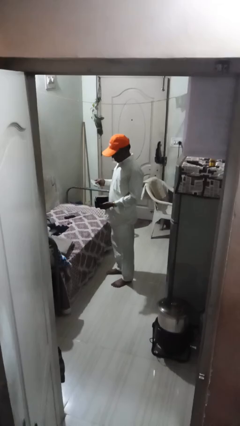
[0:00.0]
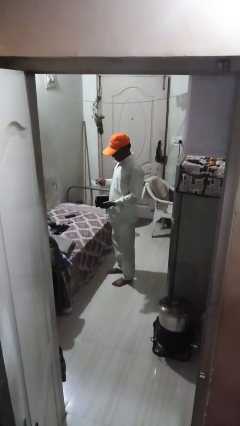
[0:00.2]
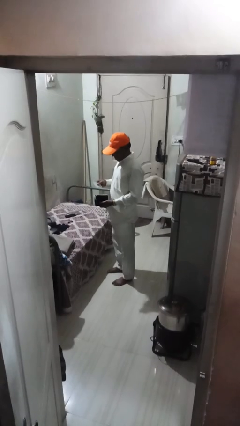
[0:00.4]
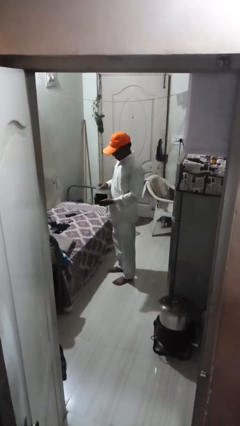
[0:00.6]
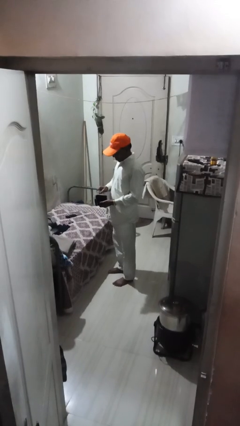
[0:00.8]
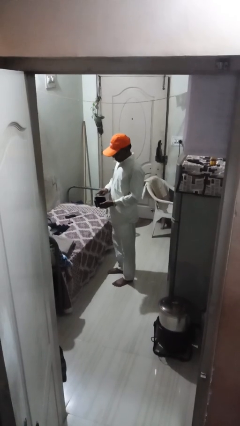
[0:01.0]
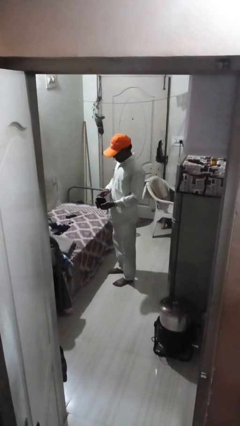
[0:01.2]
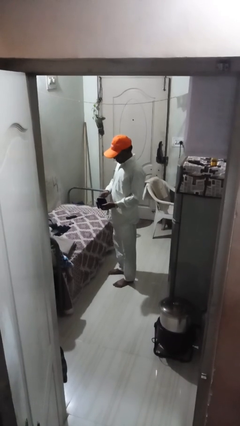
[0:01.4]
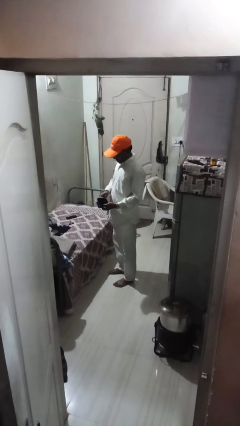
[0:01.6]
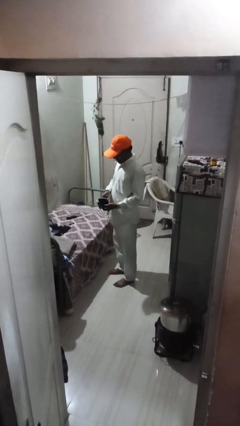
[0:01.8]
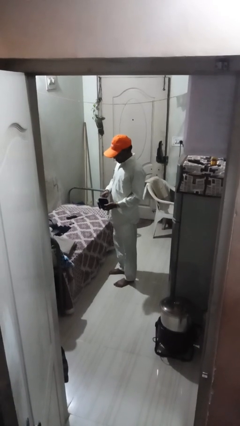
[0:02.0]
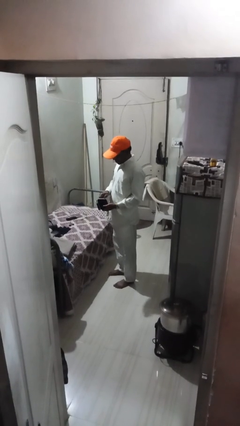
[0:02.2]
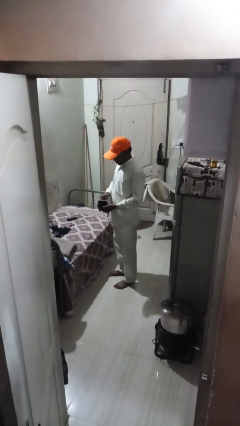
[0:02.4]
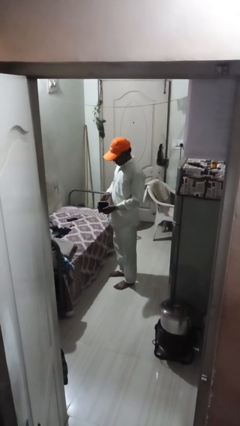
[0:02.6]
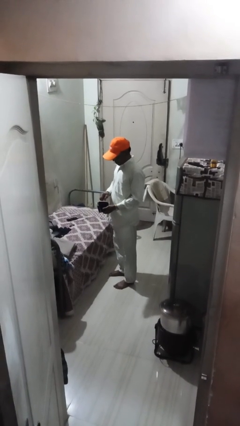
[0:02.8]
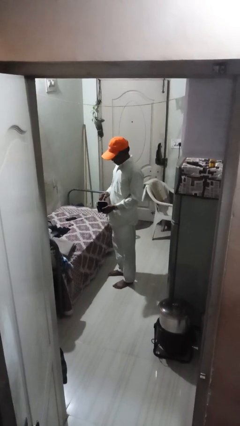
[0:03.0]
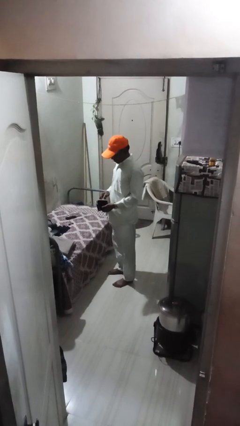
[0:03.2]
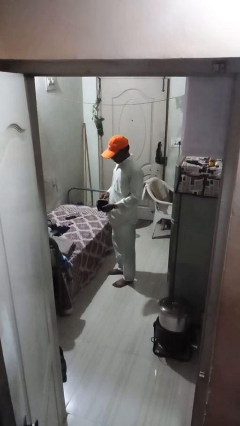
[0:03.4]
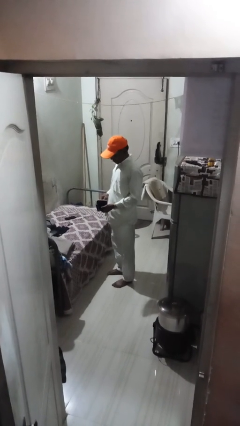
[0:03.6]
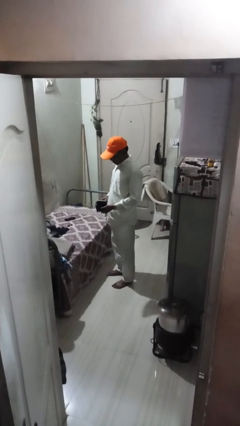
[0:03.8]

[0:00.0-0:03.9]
person puts object into purse

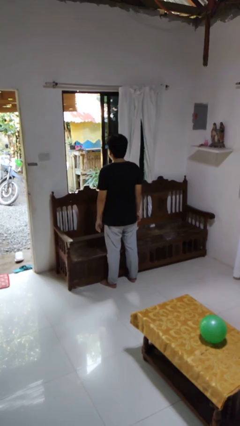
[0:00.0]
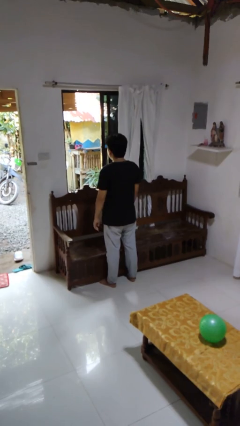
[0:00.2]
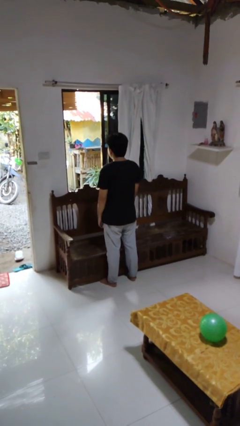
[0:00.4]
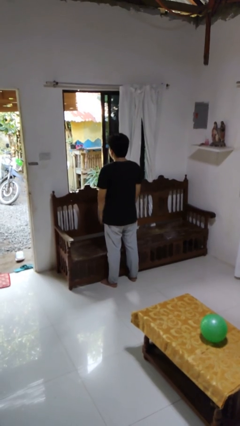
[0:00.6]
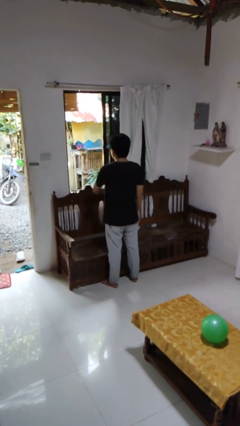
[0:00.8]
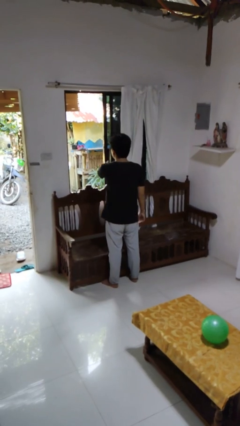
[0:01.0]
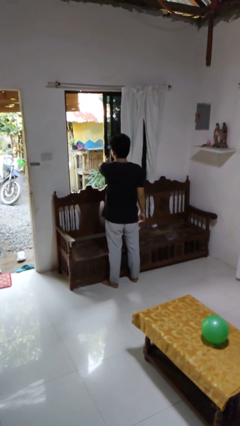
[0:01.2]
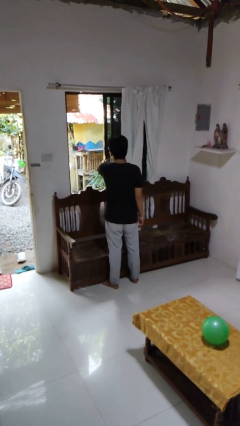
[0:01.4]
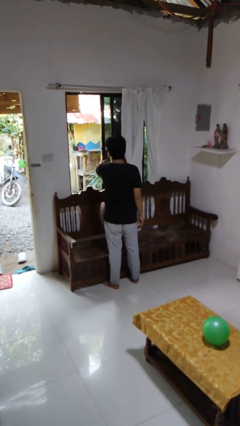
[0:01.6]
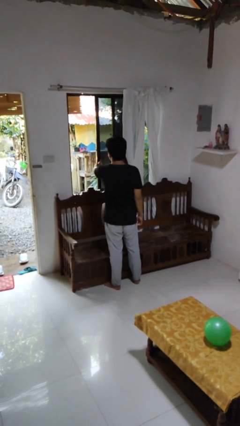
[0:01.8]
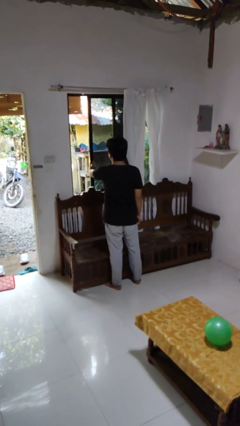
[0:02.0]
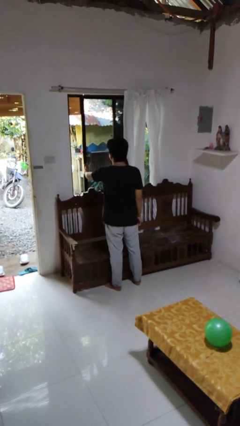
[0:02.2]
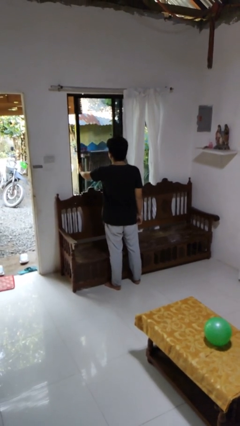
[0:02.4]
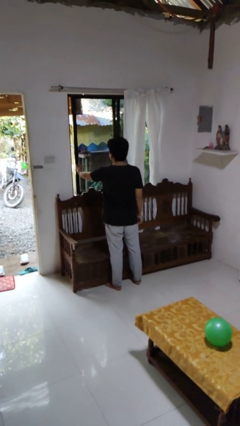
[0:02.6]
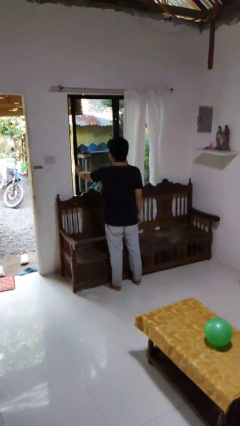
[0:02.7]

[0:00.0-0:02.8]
person closes home window

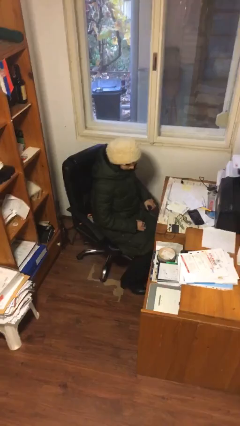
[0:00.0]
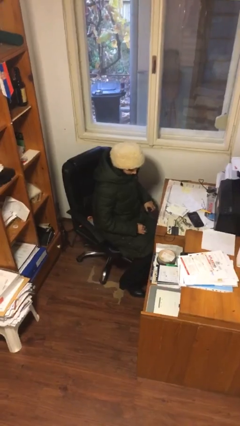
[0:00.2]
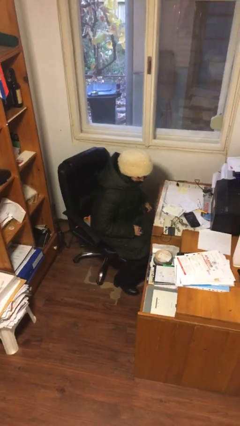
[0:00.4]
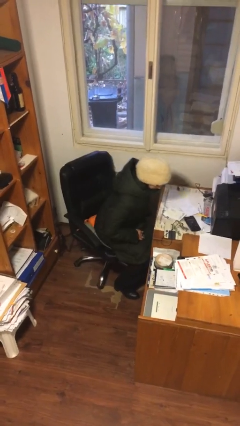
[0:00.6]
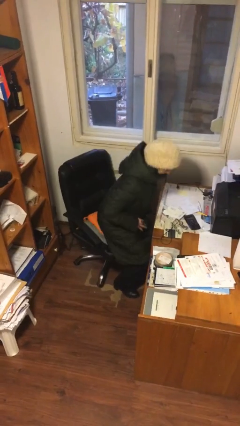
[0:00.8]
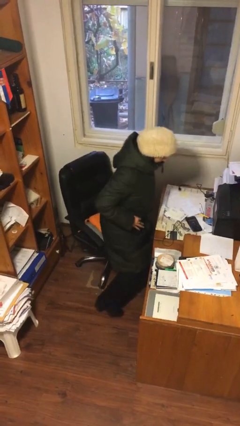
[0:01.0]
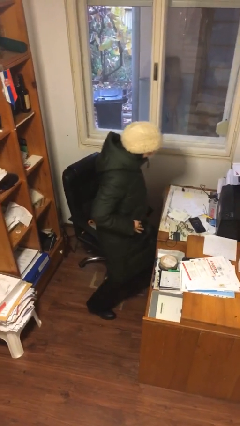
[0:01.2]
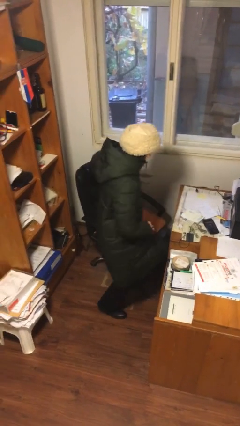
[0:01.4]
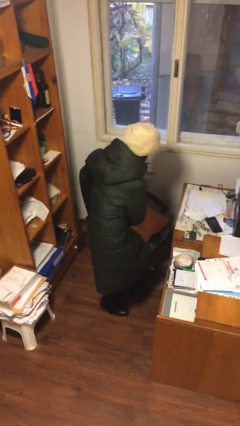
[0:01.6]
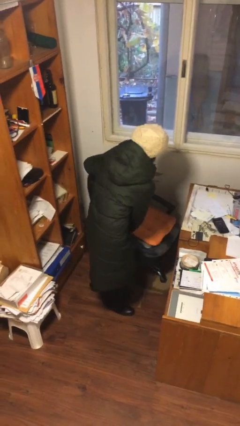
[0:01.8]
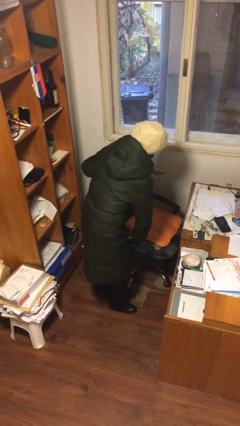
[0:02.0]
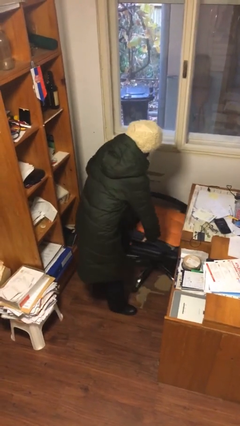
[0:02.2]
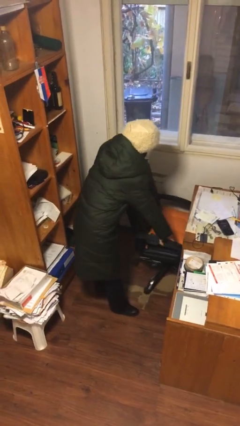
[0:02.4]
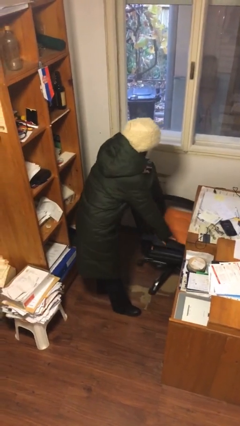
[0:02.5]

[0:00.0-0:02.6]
person stands up

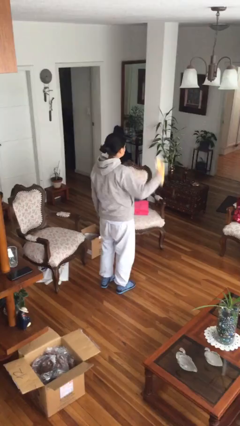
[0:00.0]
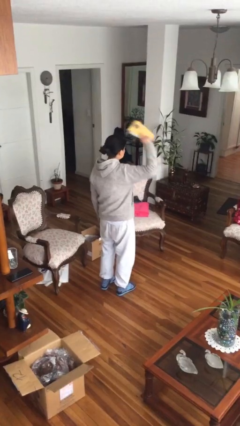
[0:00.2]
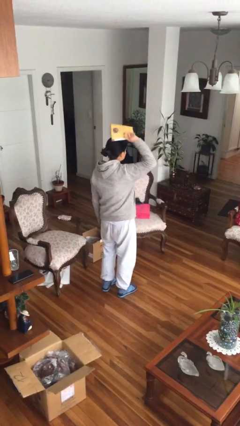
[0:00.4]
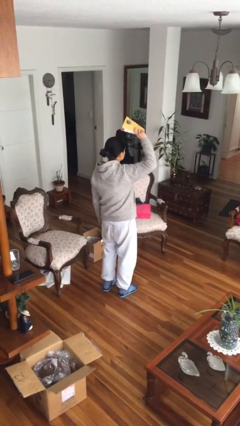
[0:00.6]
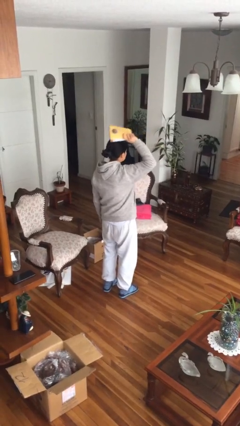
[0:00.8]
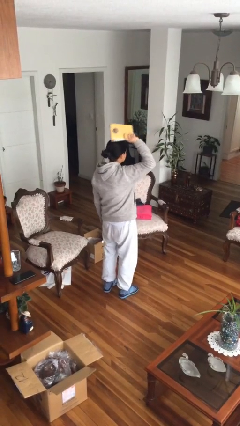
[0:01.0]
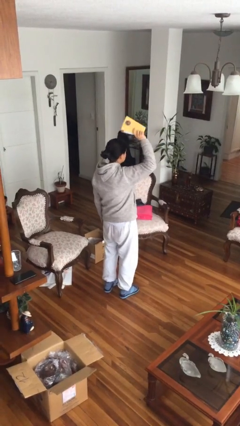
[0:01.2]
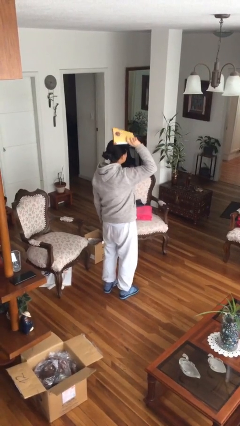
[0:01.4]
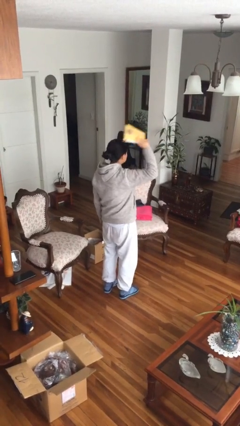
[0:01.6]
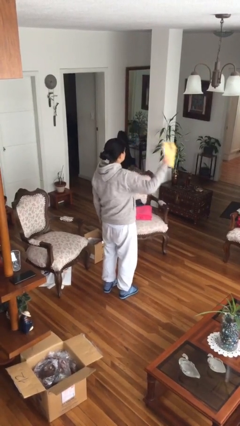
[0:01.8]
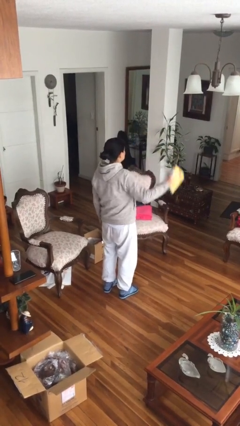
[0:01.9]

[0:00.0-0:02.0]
person holds object above head

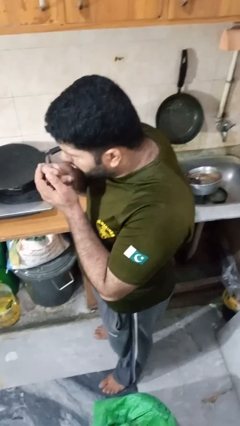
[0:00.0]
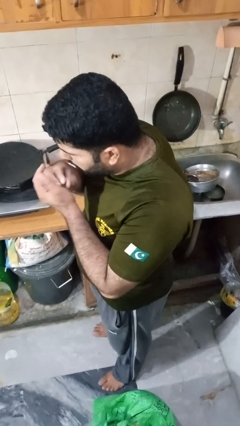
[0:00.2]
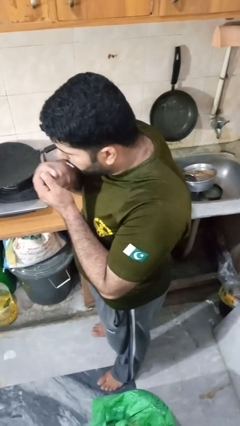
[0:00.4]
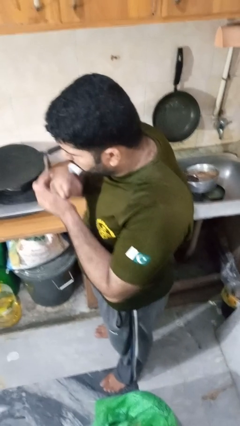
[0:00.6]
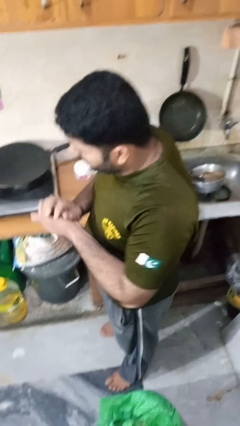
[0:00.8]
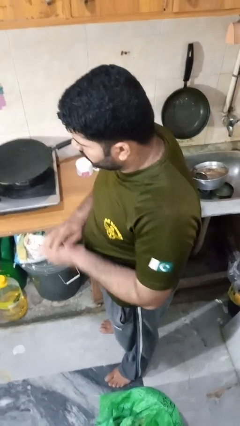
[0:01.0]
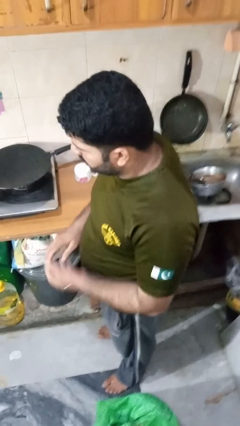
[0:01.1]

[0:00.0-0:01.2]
person burns hand

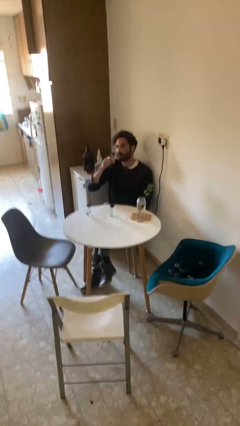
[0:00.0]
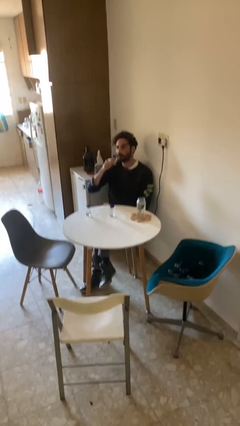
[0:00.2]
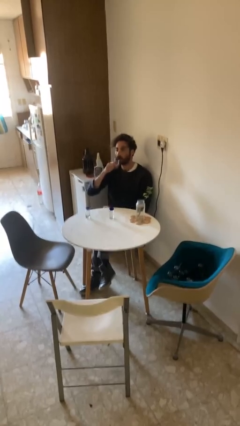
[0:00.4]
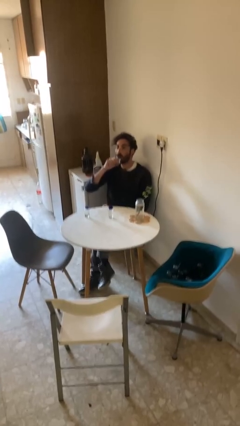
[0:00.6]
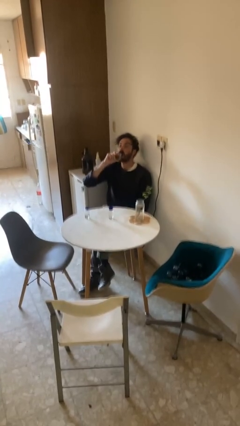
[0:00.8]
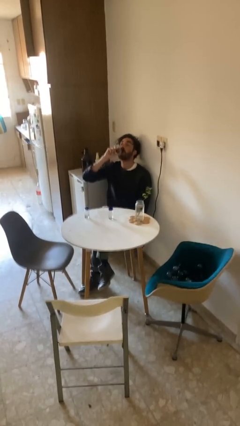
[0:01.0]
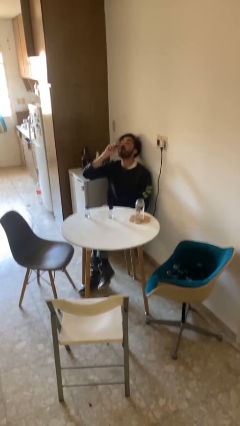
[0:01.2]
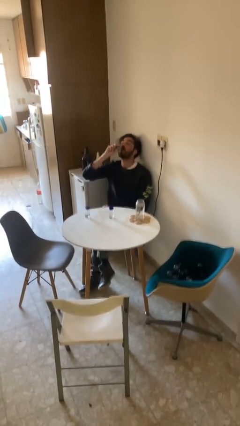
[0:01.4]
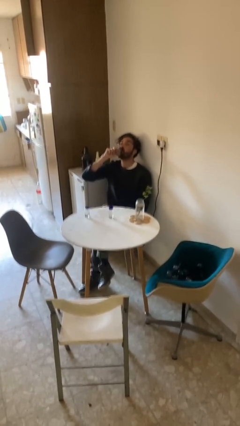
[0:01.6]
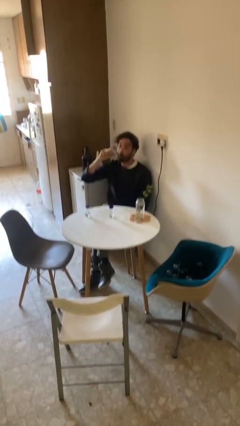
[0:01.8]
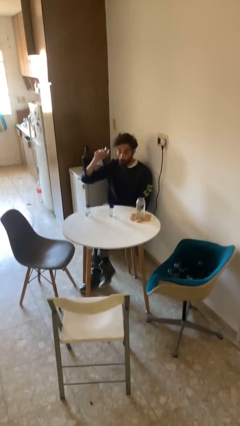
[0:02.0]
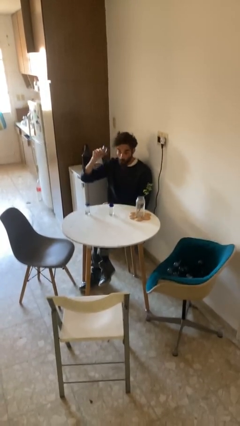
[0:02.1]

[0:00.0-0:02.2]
person drinks from shotglass

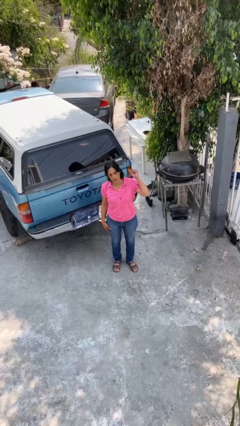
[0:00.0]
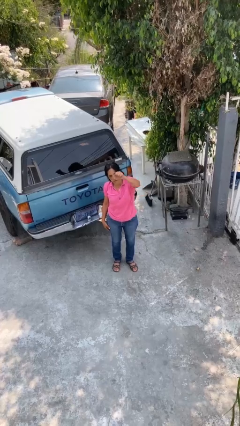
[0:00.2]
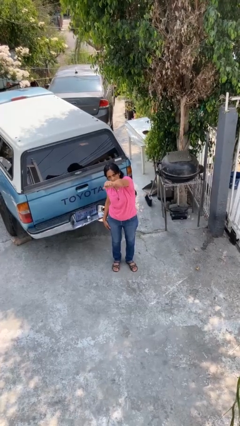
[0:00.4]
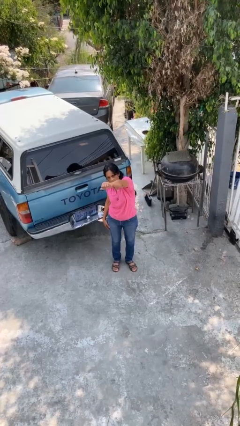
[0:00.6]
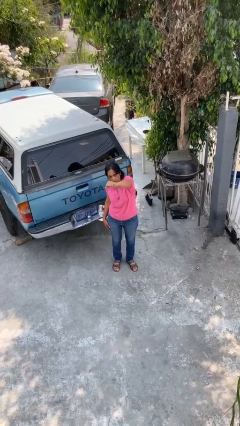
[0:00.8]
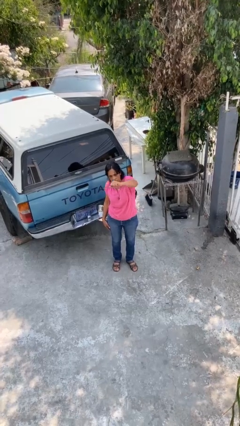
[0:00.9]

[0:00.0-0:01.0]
person punches

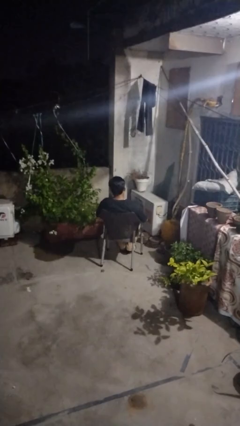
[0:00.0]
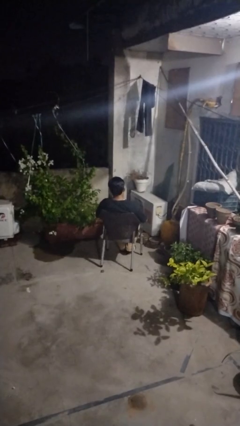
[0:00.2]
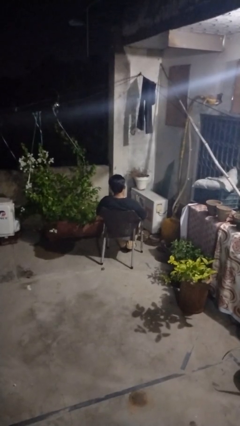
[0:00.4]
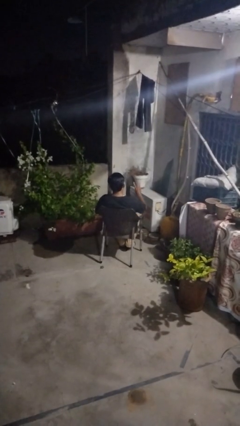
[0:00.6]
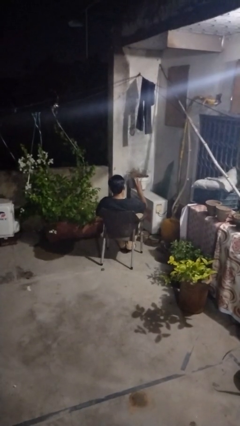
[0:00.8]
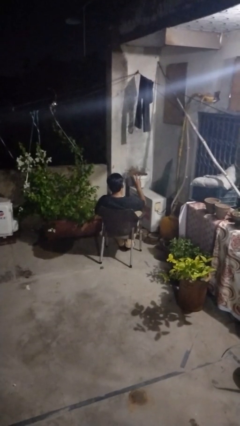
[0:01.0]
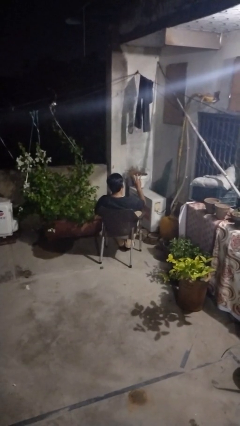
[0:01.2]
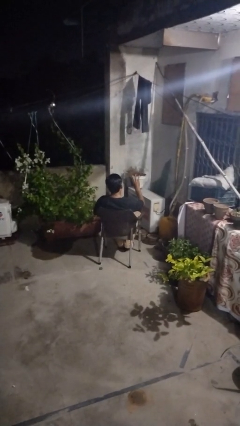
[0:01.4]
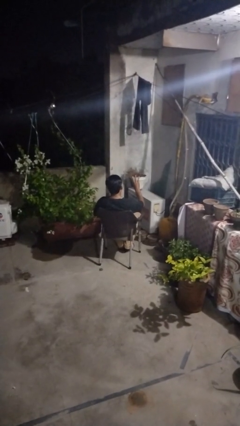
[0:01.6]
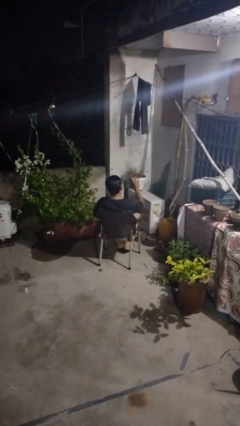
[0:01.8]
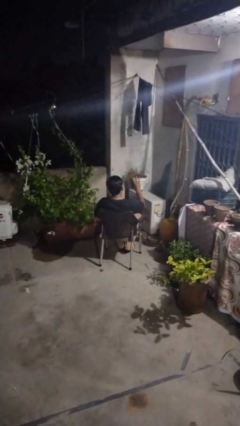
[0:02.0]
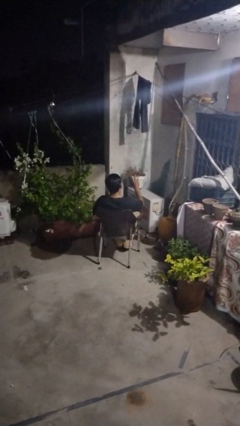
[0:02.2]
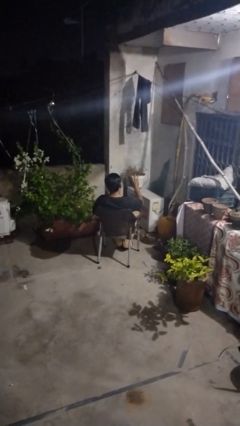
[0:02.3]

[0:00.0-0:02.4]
person gestures number three
